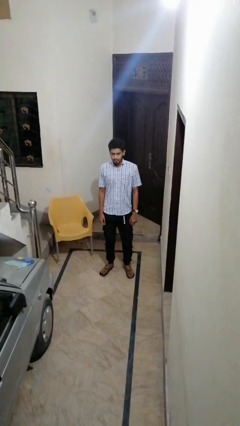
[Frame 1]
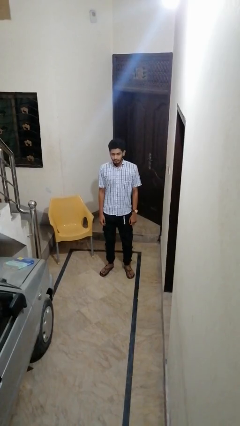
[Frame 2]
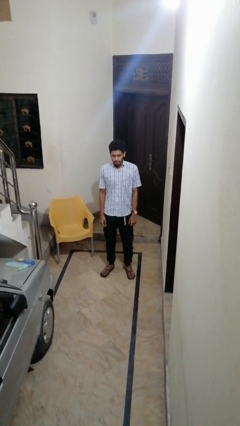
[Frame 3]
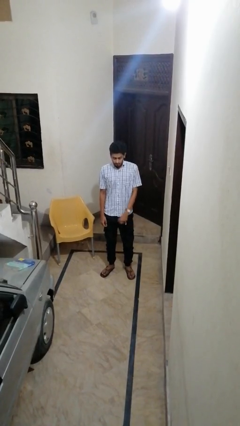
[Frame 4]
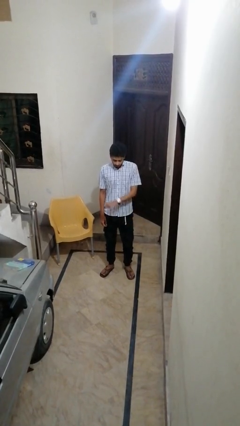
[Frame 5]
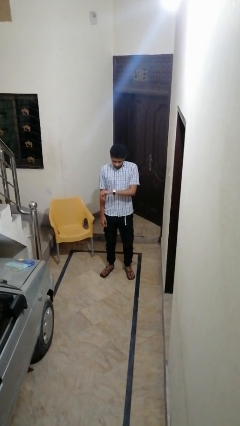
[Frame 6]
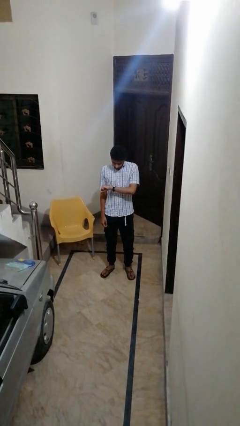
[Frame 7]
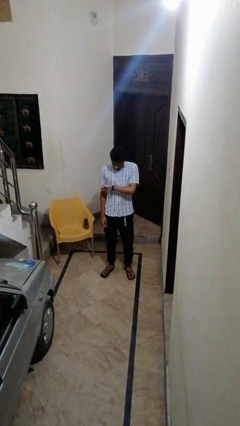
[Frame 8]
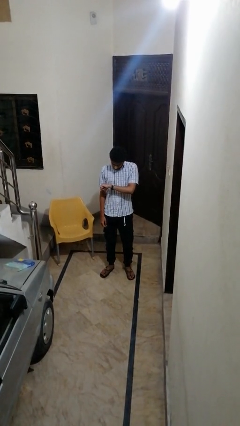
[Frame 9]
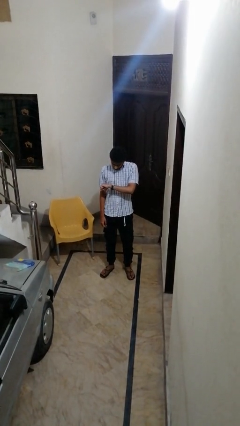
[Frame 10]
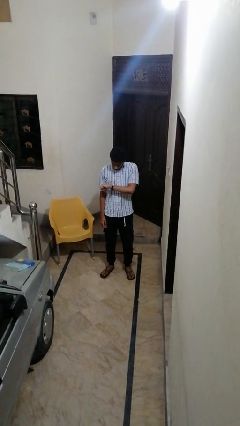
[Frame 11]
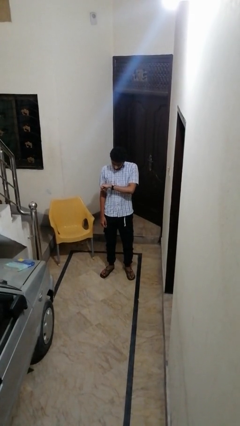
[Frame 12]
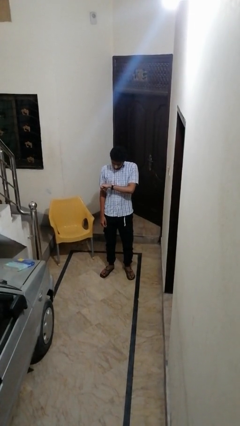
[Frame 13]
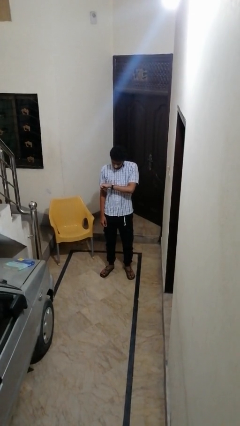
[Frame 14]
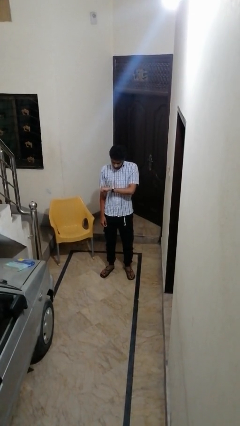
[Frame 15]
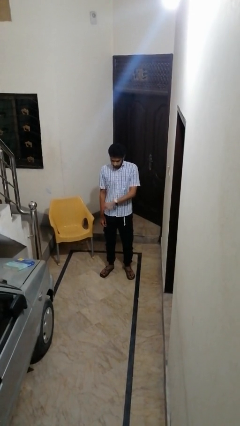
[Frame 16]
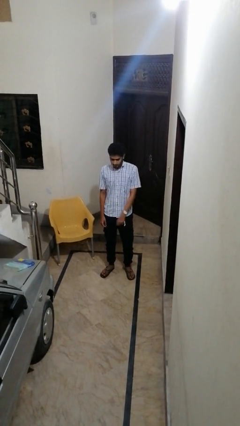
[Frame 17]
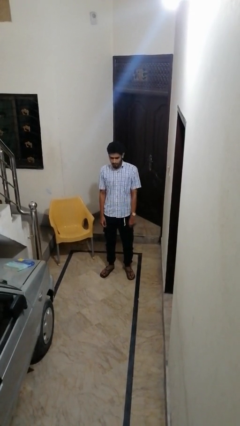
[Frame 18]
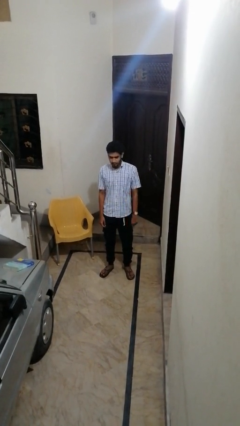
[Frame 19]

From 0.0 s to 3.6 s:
person looks at wristwatch

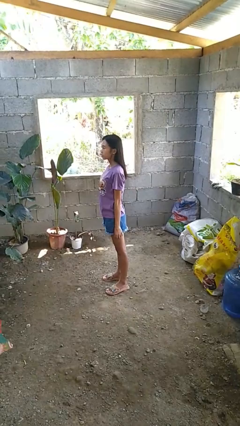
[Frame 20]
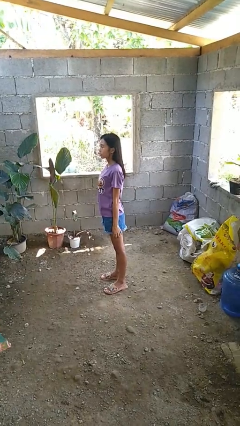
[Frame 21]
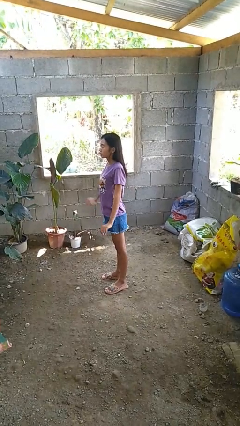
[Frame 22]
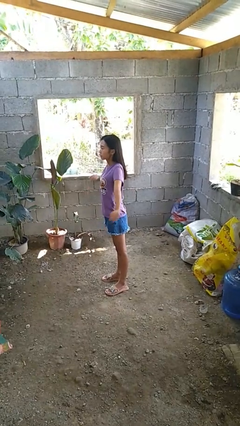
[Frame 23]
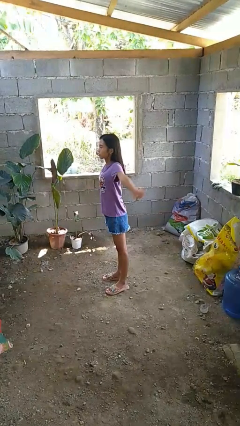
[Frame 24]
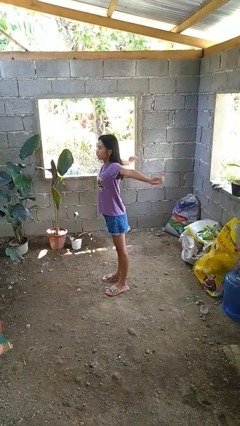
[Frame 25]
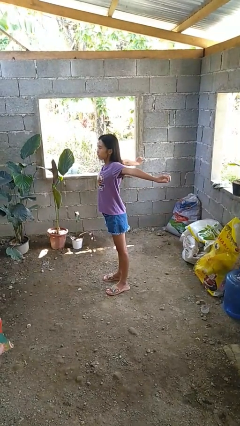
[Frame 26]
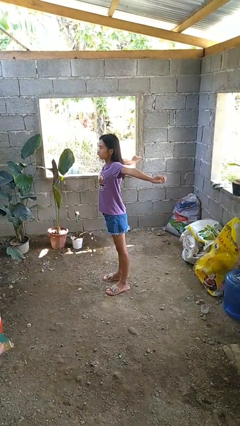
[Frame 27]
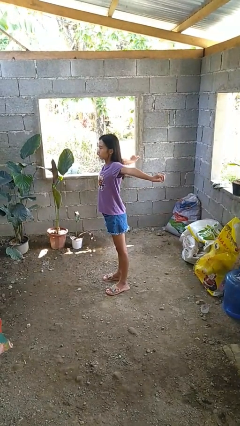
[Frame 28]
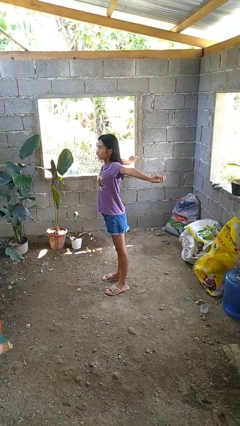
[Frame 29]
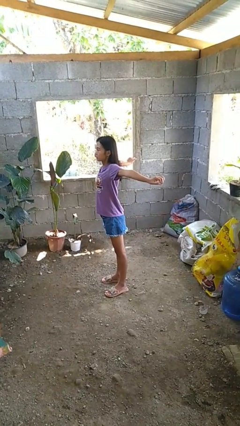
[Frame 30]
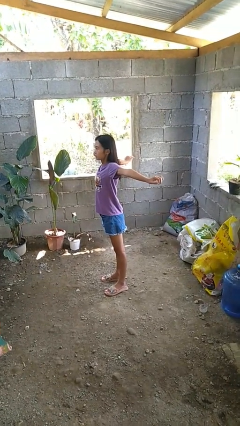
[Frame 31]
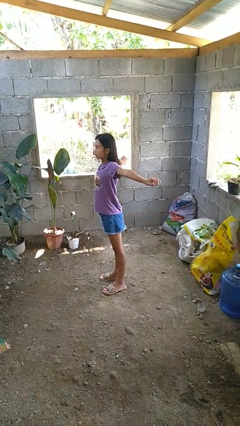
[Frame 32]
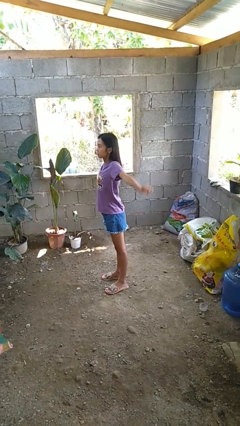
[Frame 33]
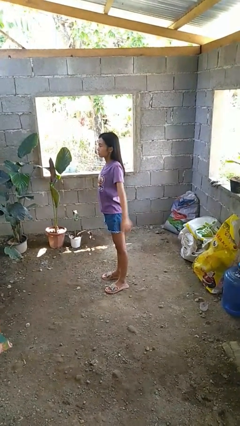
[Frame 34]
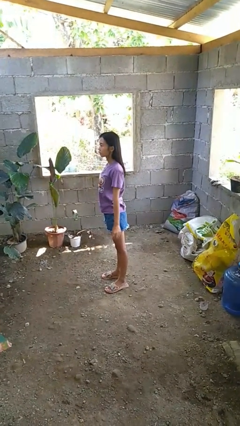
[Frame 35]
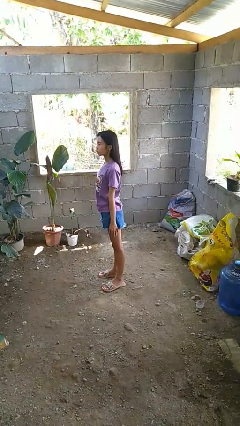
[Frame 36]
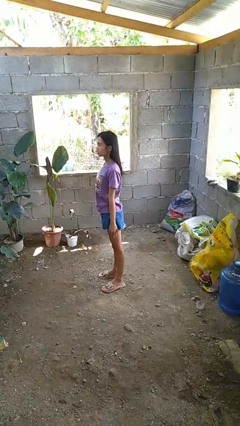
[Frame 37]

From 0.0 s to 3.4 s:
person stretches arms to side

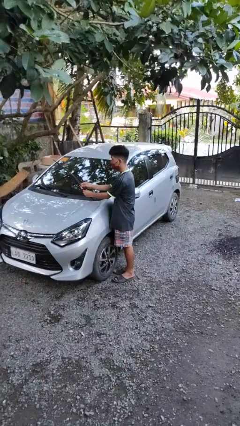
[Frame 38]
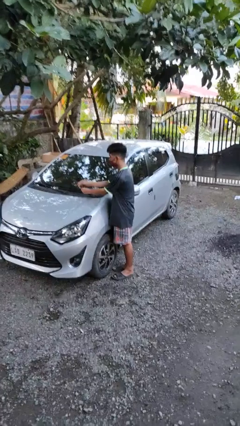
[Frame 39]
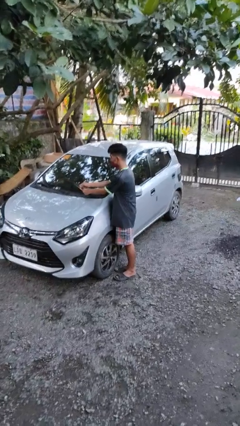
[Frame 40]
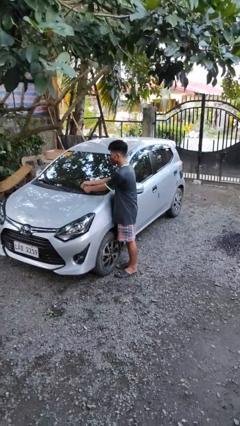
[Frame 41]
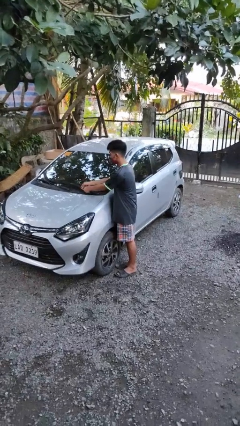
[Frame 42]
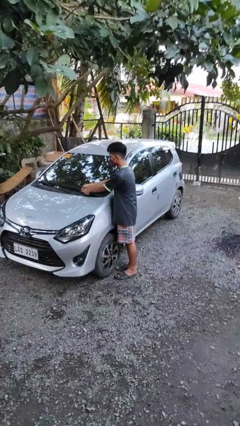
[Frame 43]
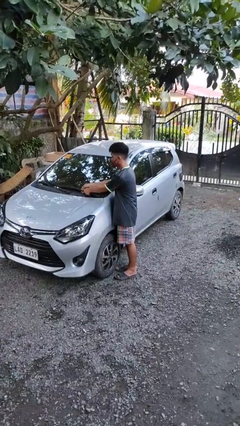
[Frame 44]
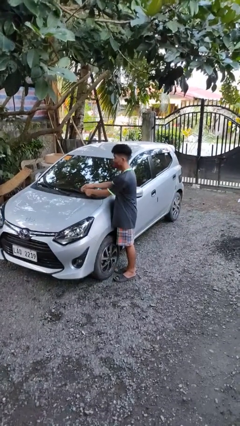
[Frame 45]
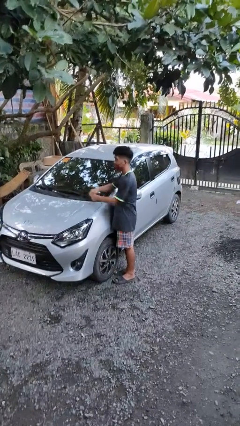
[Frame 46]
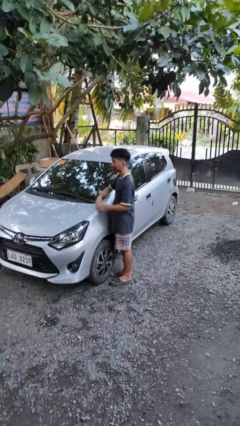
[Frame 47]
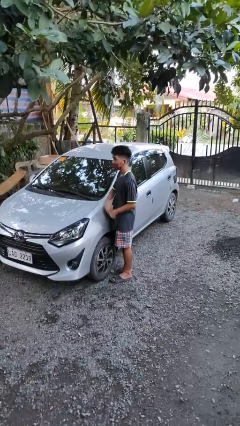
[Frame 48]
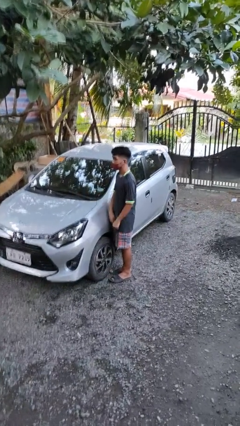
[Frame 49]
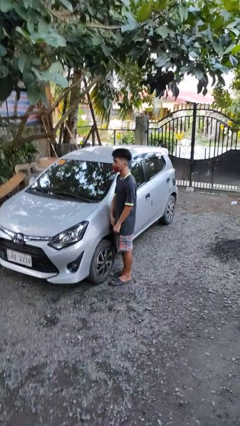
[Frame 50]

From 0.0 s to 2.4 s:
person flips down car wipers

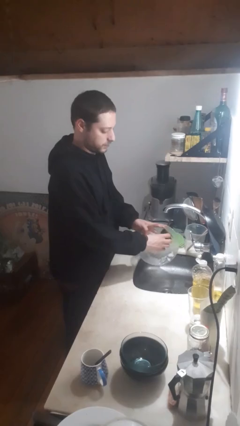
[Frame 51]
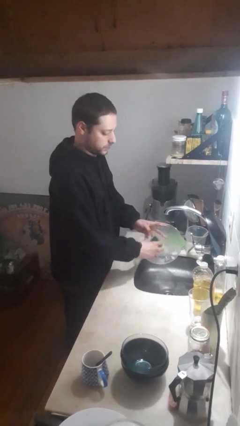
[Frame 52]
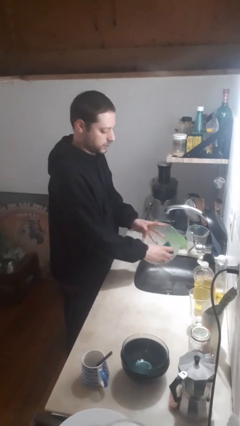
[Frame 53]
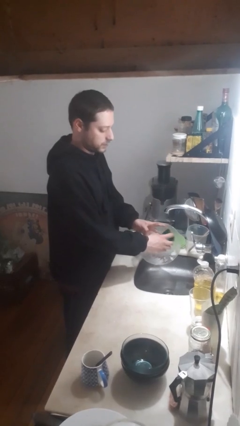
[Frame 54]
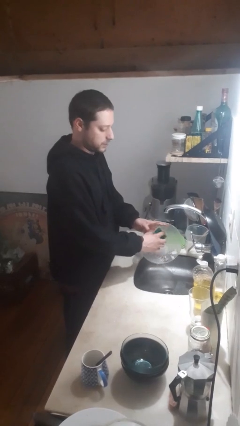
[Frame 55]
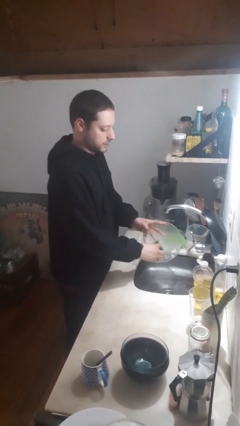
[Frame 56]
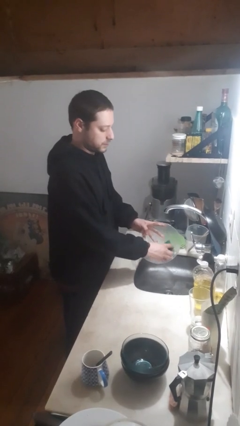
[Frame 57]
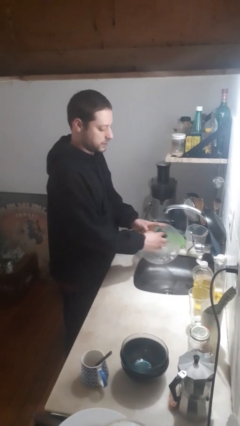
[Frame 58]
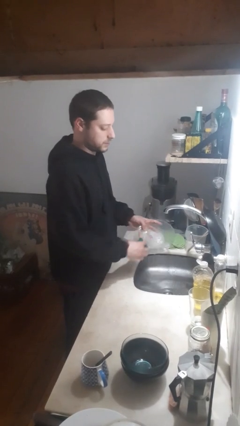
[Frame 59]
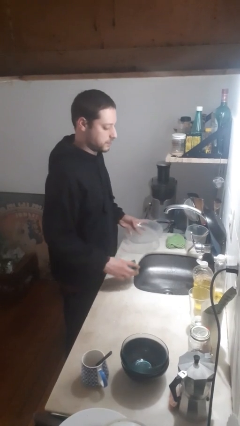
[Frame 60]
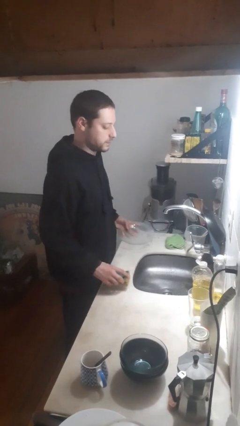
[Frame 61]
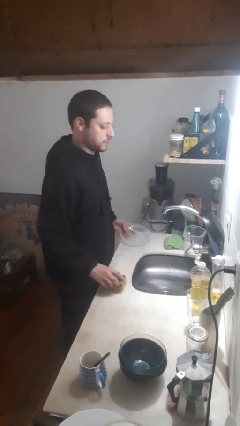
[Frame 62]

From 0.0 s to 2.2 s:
person washes dish

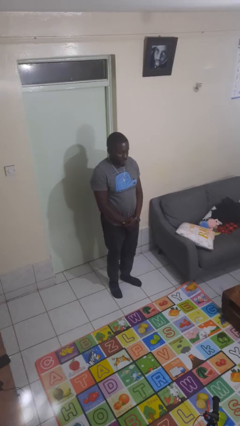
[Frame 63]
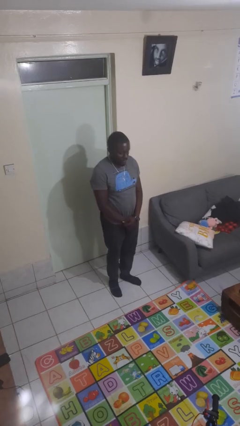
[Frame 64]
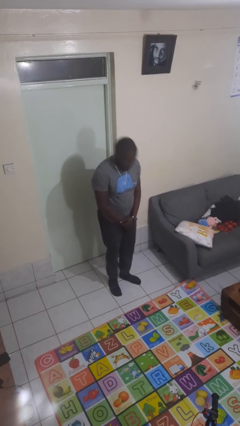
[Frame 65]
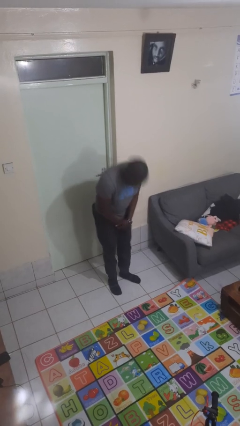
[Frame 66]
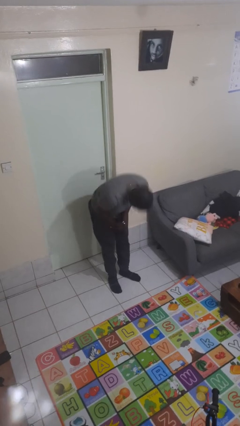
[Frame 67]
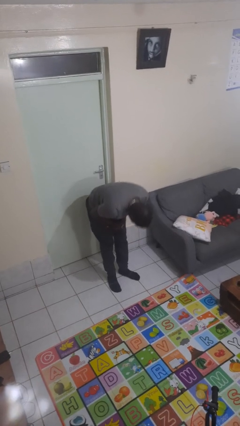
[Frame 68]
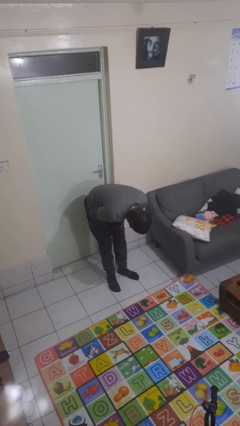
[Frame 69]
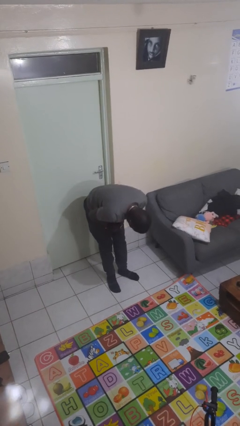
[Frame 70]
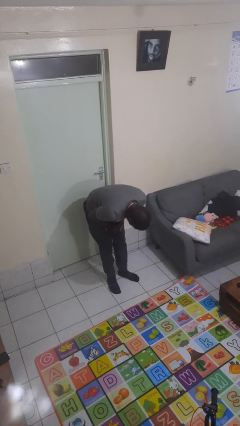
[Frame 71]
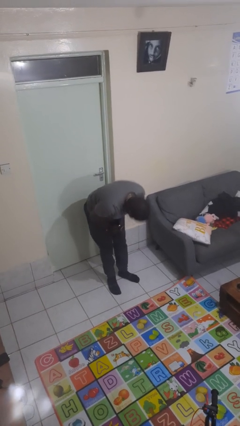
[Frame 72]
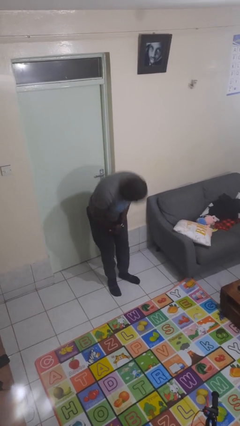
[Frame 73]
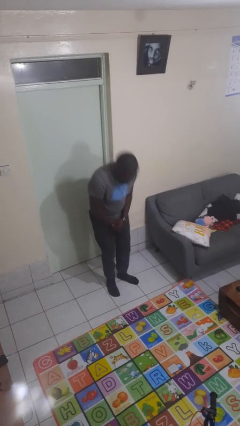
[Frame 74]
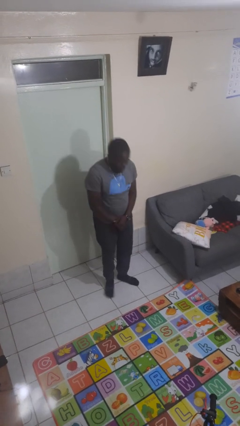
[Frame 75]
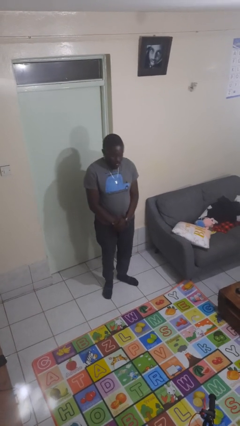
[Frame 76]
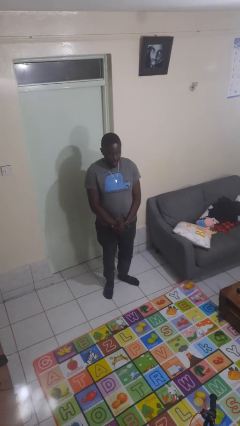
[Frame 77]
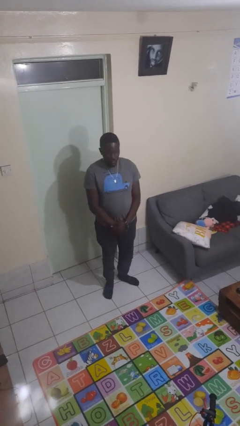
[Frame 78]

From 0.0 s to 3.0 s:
person bows

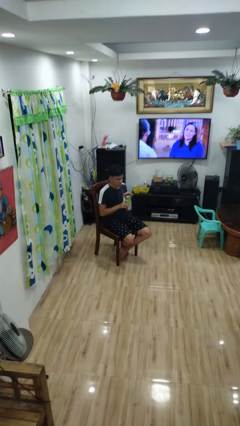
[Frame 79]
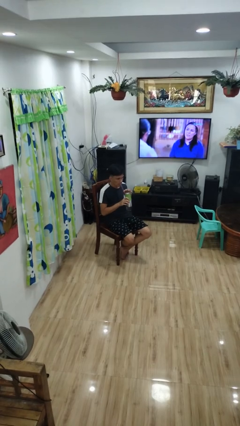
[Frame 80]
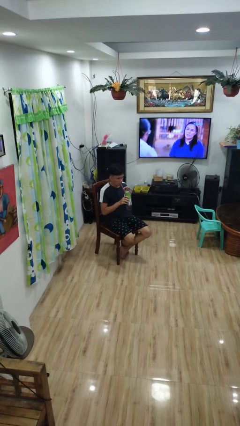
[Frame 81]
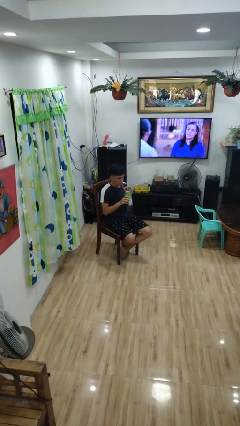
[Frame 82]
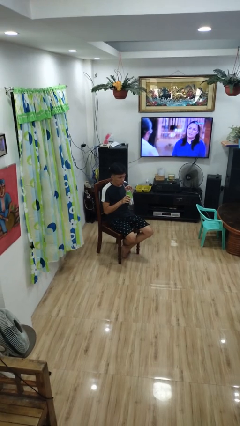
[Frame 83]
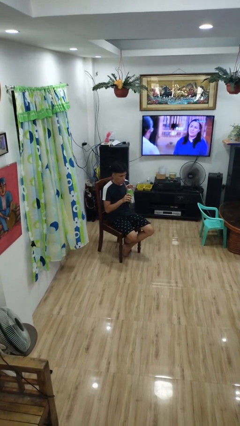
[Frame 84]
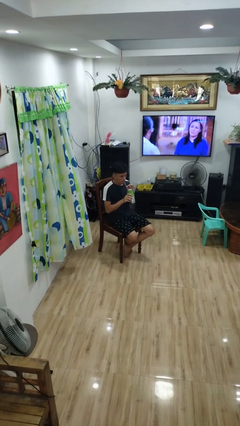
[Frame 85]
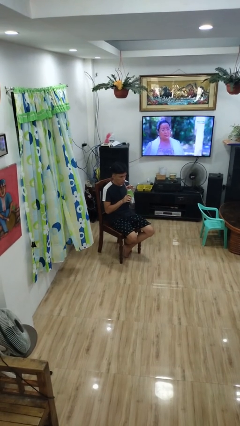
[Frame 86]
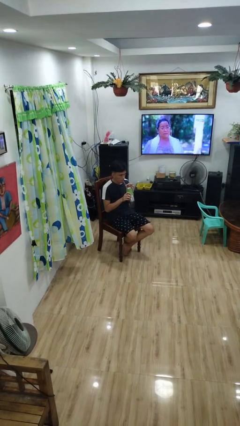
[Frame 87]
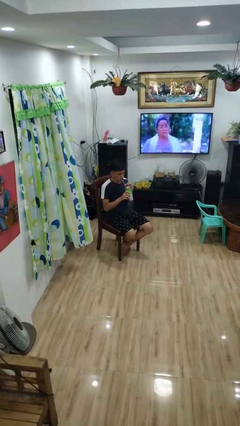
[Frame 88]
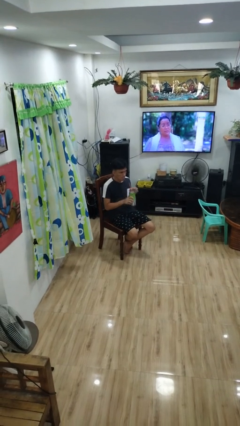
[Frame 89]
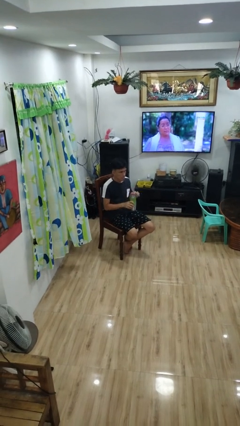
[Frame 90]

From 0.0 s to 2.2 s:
person drinks from straw

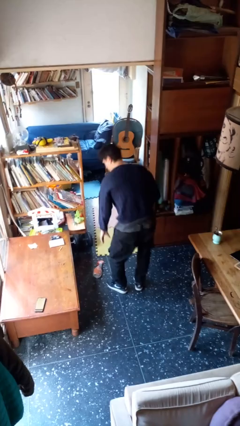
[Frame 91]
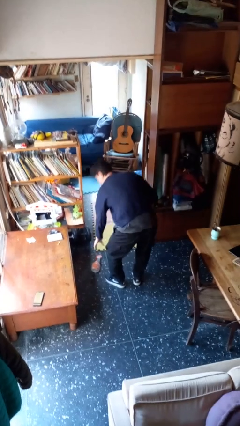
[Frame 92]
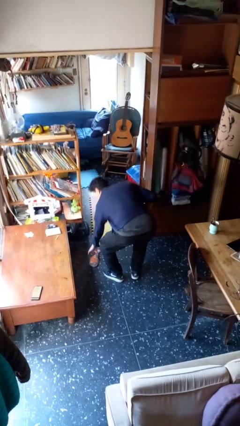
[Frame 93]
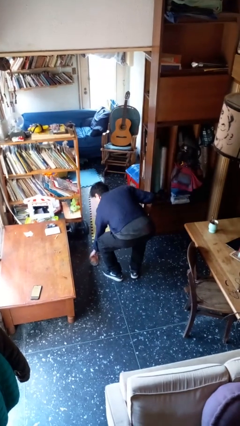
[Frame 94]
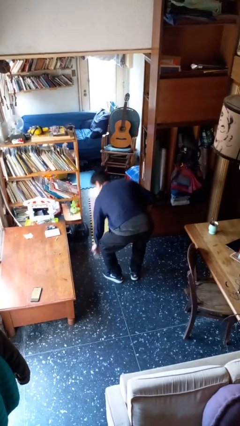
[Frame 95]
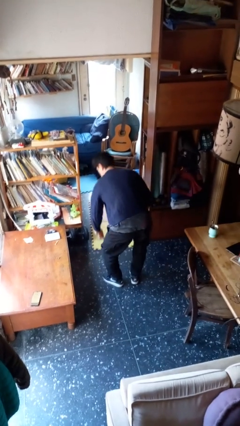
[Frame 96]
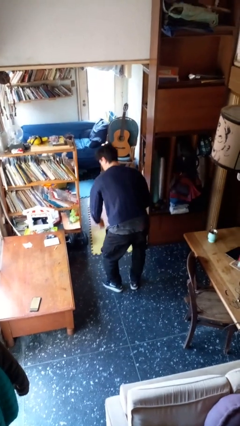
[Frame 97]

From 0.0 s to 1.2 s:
person picks up object from floor
